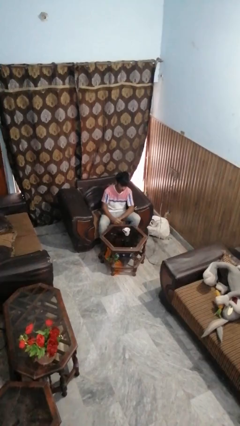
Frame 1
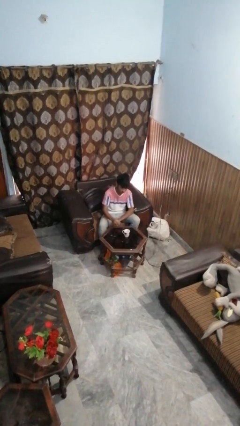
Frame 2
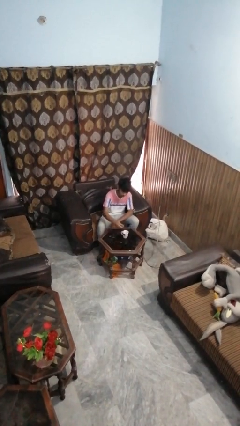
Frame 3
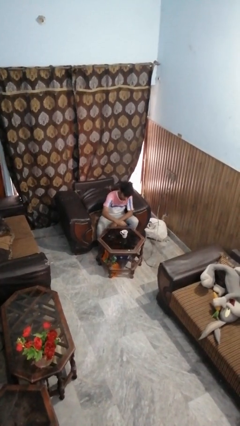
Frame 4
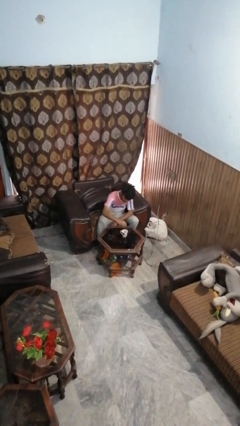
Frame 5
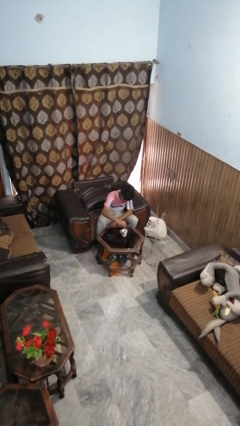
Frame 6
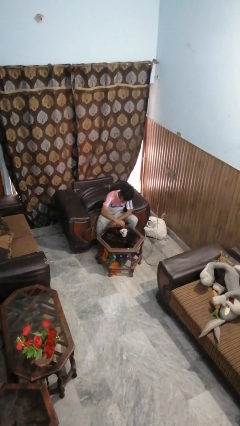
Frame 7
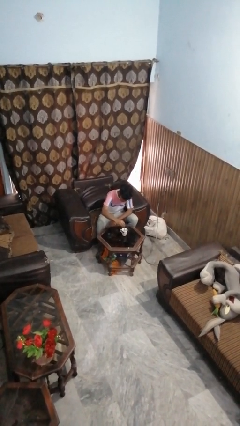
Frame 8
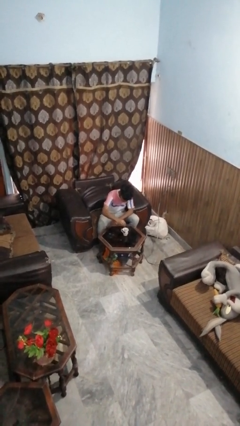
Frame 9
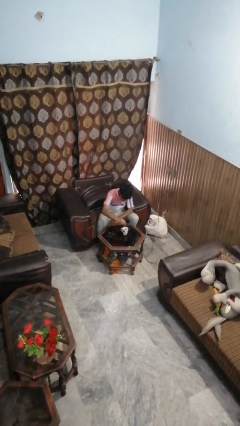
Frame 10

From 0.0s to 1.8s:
person stirs mug

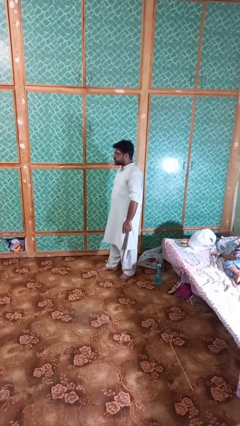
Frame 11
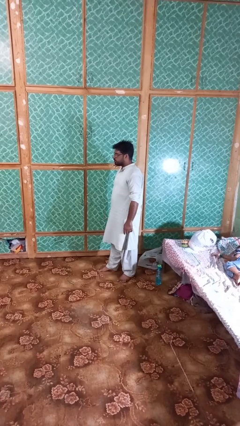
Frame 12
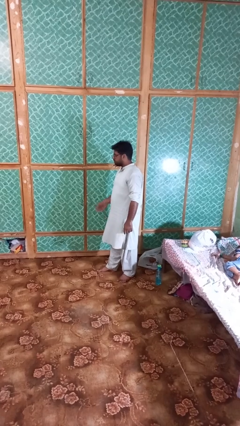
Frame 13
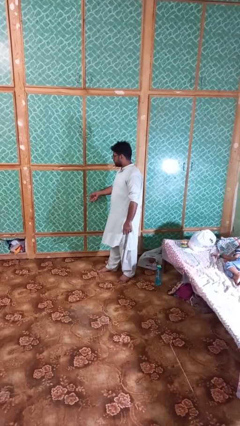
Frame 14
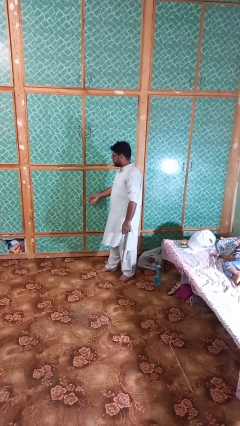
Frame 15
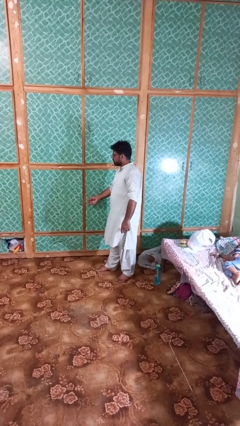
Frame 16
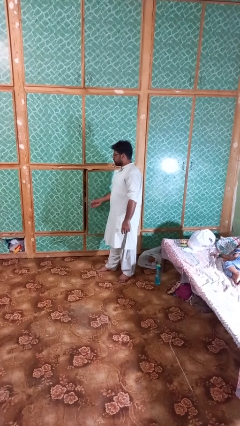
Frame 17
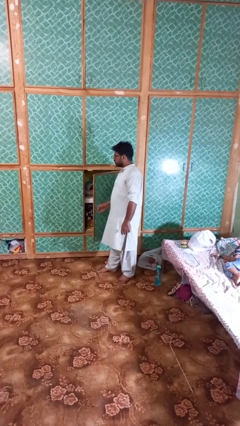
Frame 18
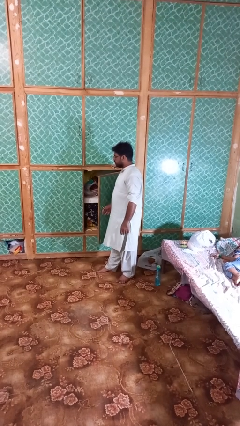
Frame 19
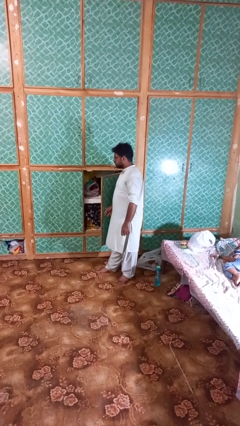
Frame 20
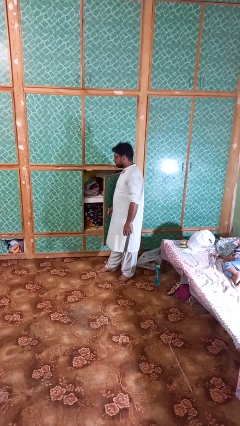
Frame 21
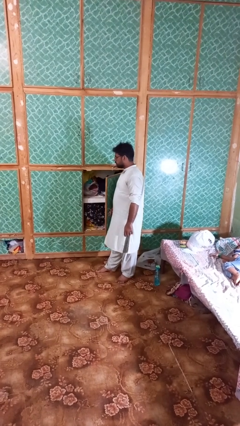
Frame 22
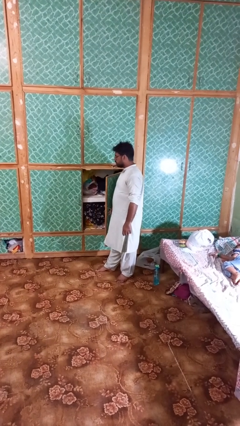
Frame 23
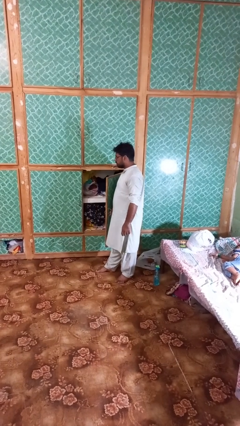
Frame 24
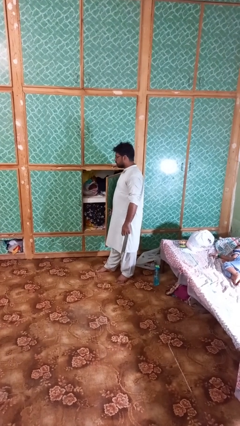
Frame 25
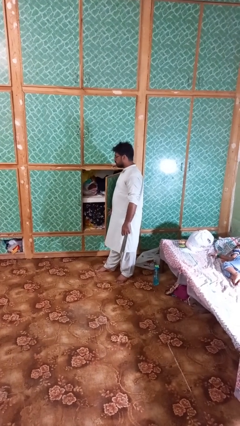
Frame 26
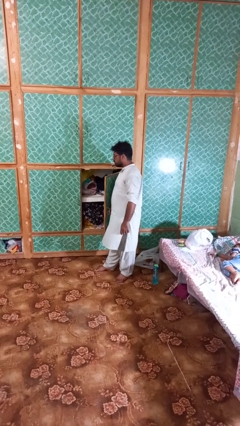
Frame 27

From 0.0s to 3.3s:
person opens closet door

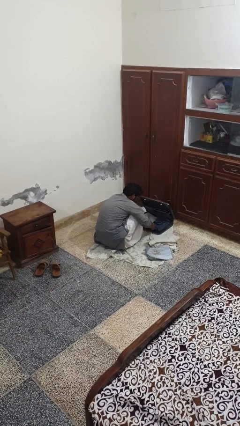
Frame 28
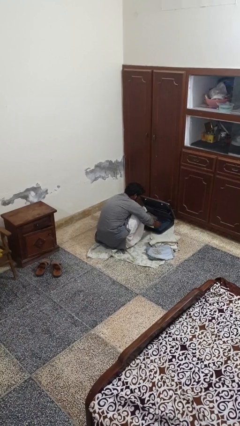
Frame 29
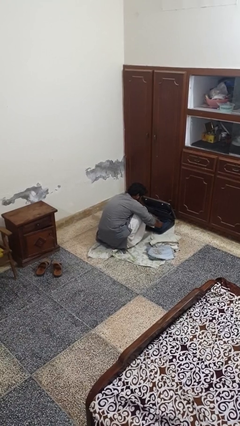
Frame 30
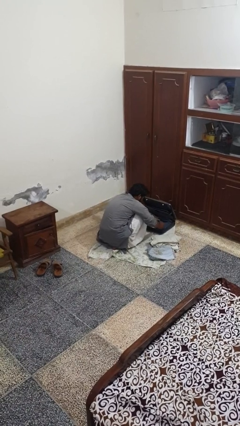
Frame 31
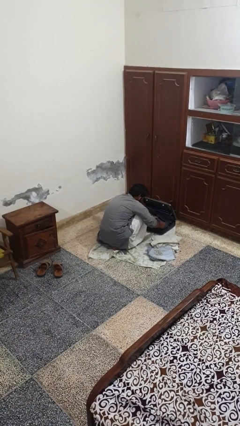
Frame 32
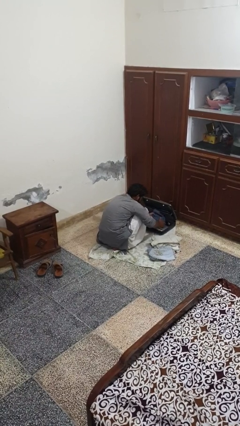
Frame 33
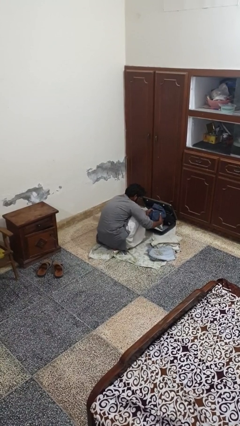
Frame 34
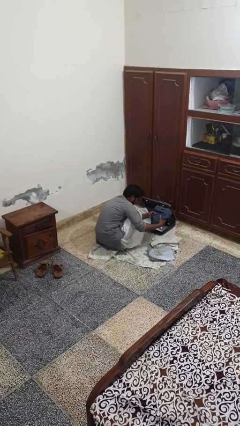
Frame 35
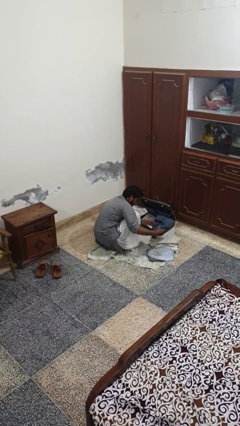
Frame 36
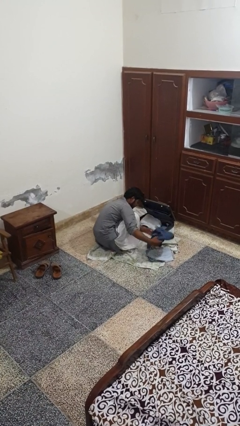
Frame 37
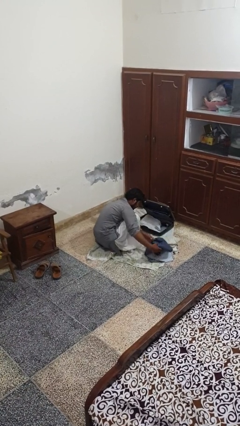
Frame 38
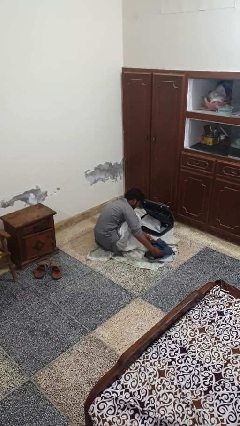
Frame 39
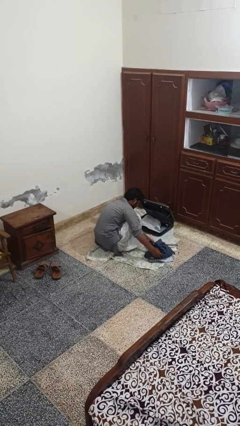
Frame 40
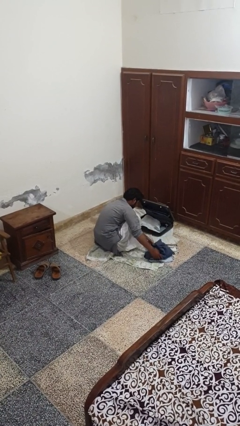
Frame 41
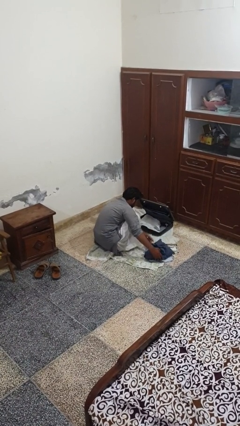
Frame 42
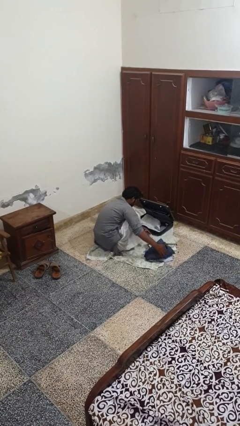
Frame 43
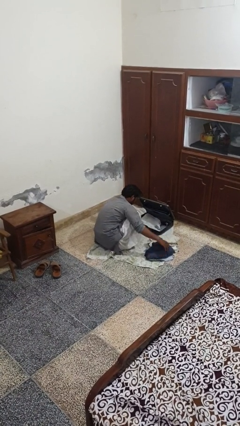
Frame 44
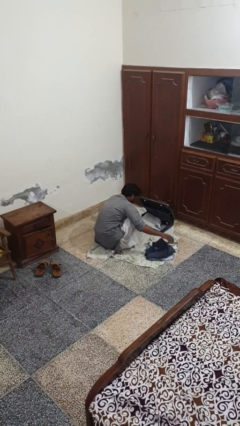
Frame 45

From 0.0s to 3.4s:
person unloads clothes from suitcase

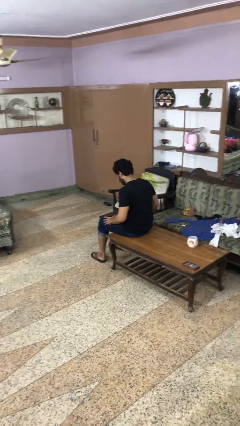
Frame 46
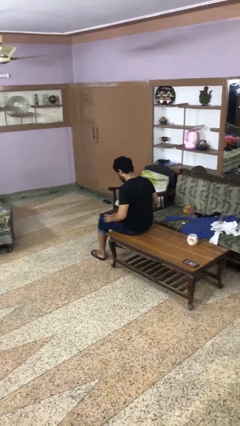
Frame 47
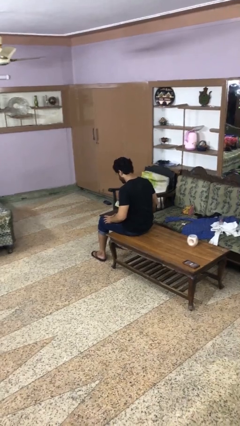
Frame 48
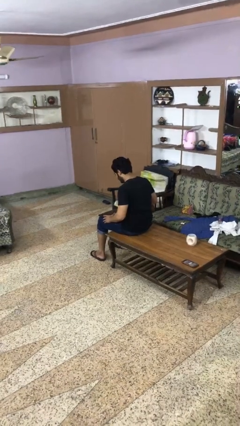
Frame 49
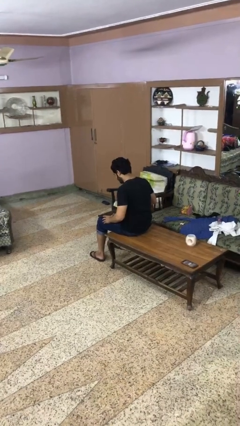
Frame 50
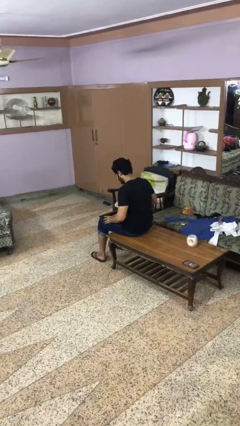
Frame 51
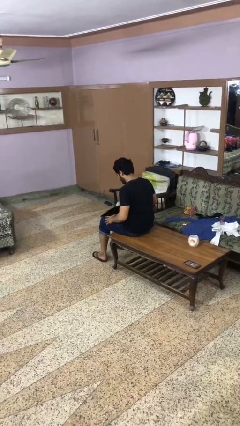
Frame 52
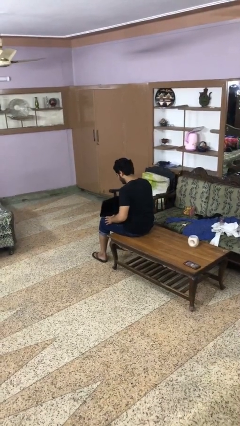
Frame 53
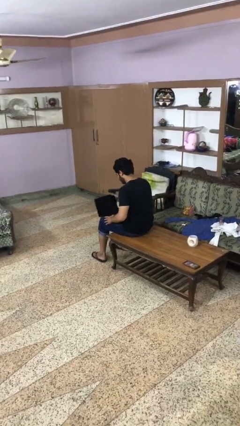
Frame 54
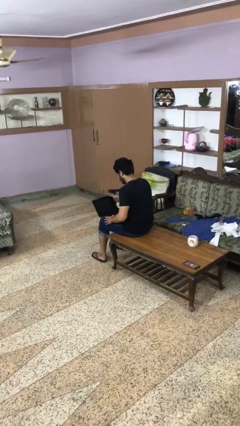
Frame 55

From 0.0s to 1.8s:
person opens laptop

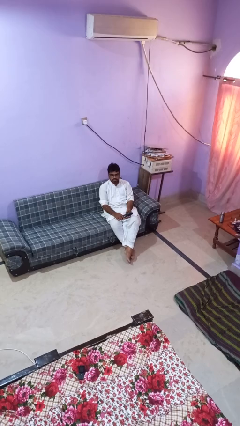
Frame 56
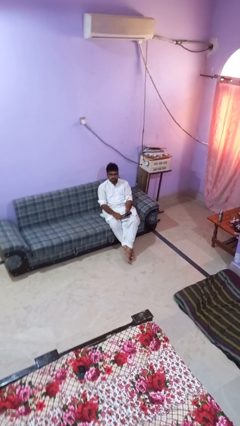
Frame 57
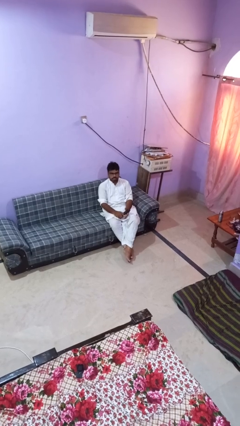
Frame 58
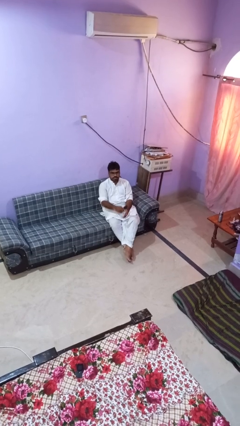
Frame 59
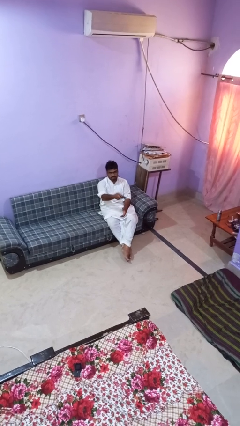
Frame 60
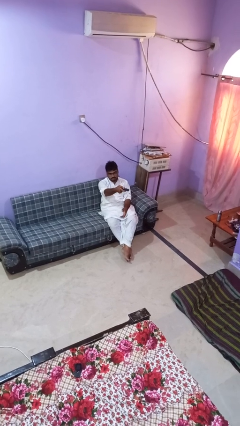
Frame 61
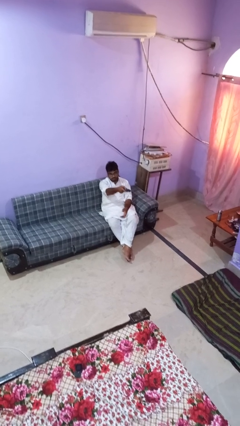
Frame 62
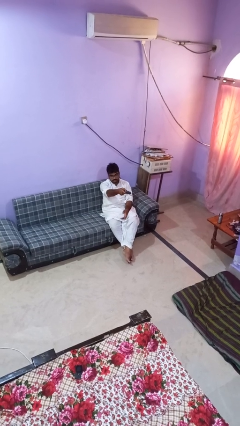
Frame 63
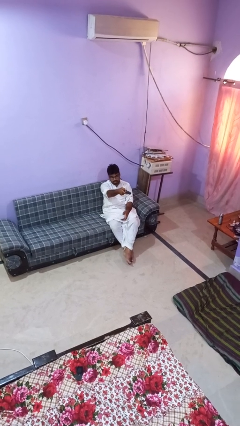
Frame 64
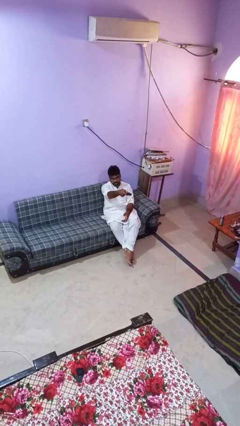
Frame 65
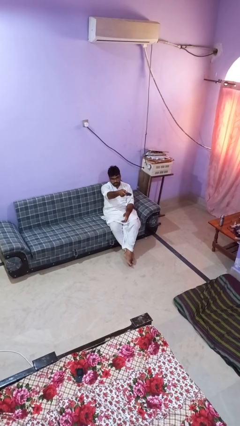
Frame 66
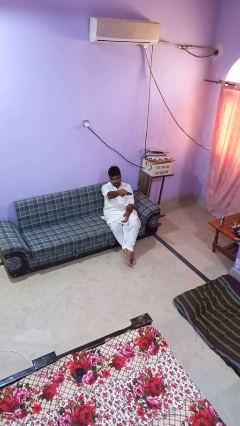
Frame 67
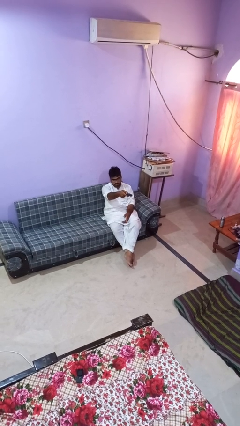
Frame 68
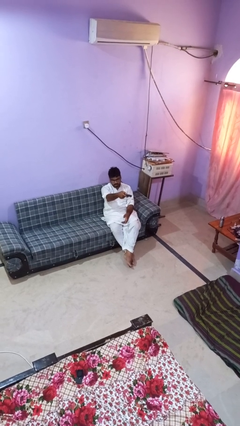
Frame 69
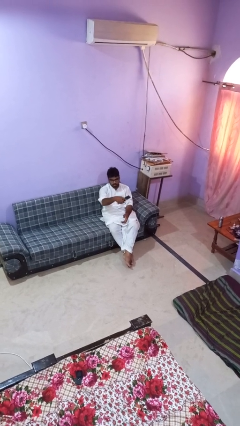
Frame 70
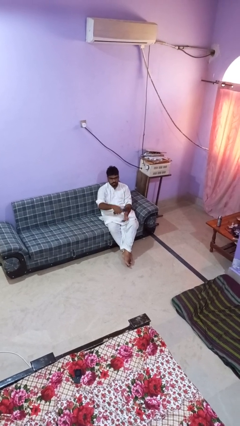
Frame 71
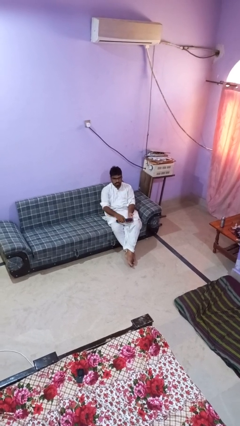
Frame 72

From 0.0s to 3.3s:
person uses television remote

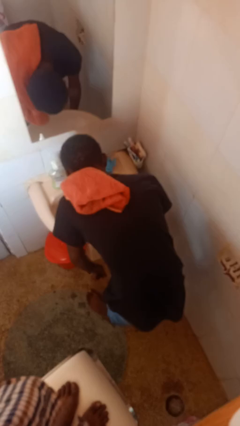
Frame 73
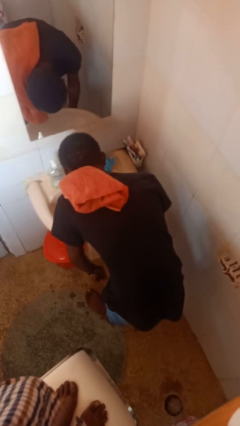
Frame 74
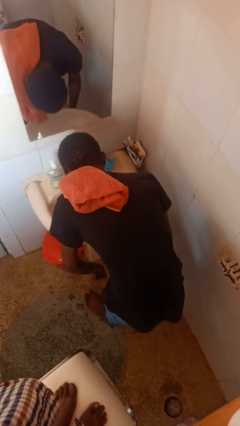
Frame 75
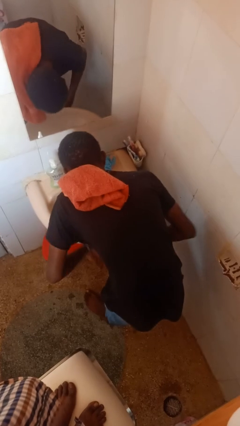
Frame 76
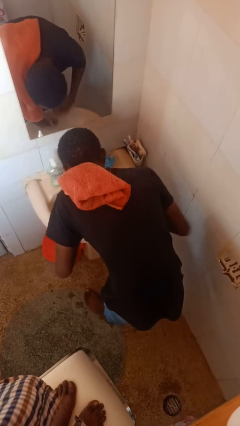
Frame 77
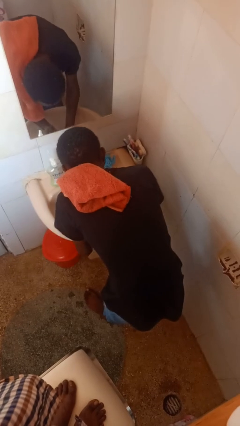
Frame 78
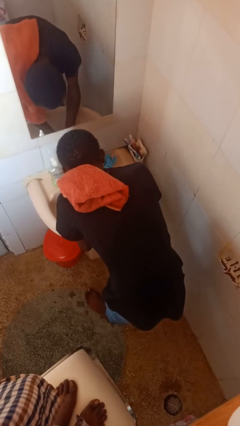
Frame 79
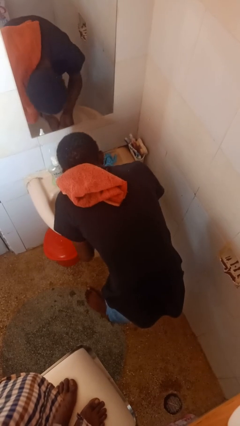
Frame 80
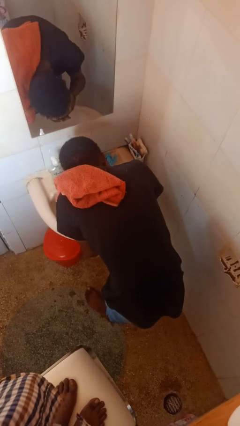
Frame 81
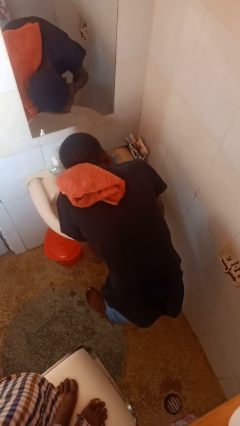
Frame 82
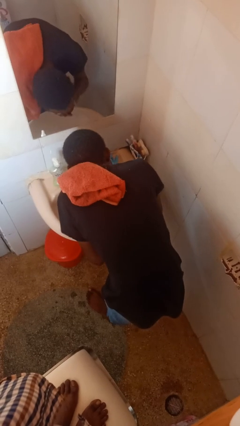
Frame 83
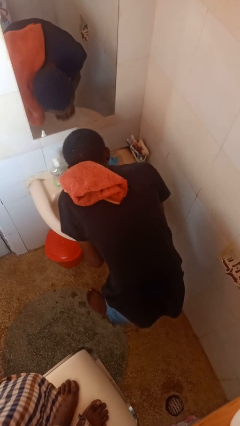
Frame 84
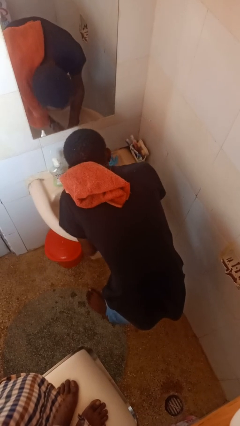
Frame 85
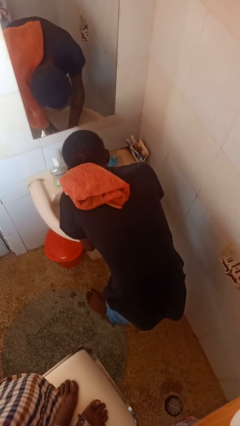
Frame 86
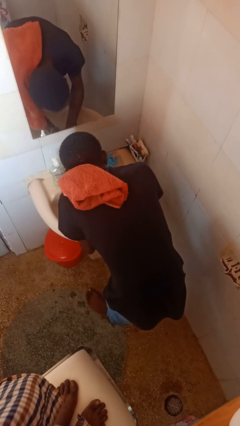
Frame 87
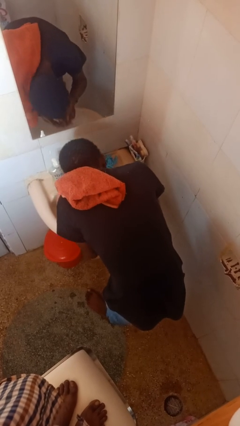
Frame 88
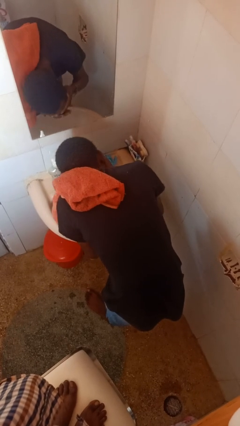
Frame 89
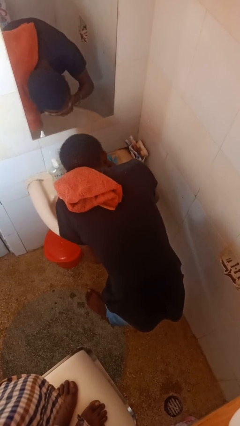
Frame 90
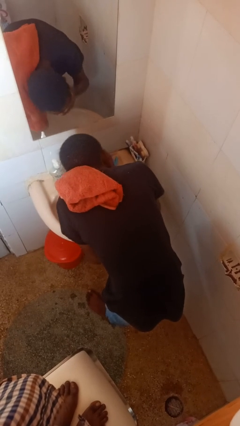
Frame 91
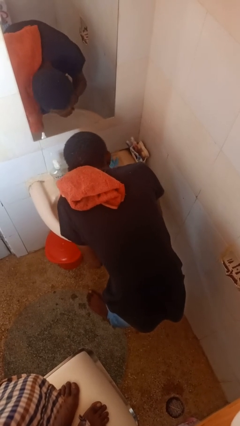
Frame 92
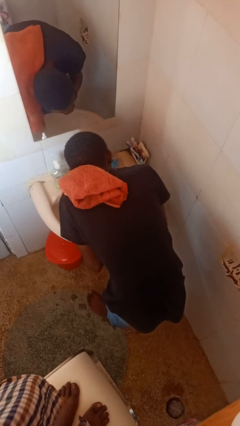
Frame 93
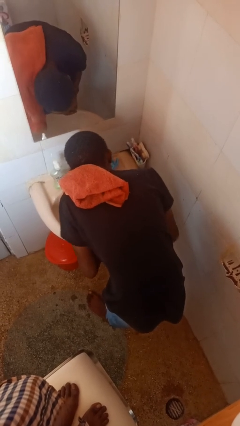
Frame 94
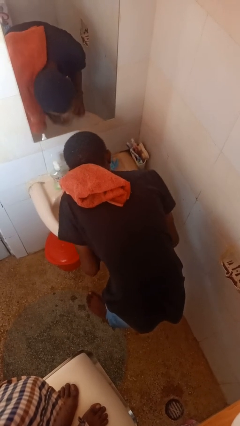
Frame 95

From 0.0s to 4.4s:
person washes face
